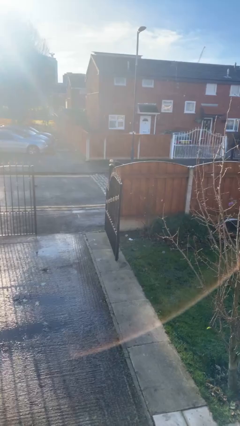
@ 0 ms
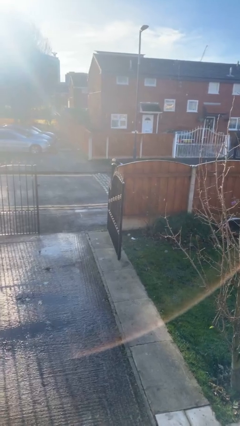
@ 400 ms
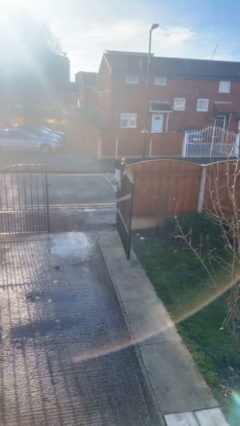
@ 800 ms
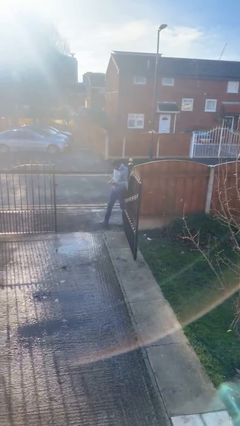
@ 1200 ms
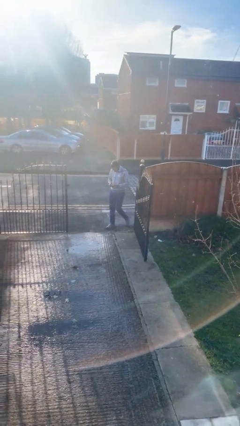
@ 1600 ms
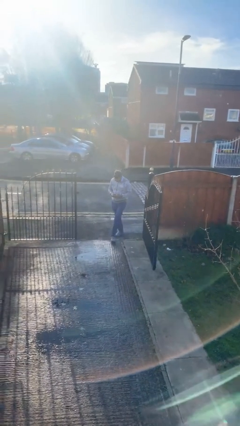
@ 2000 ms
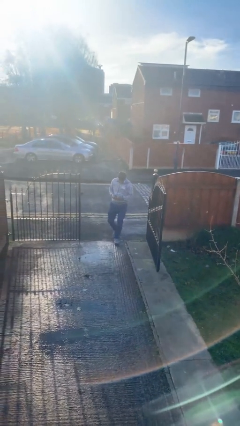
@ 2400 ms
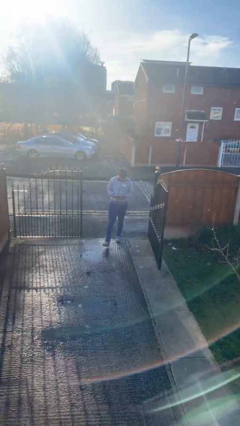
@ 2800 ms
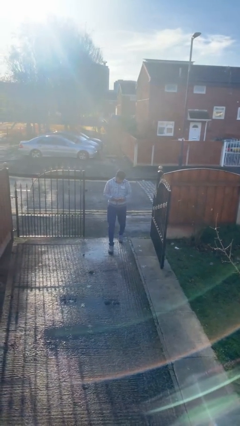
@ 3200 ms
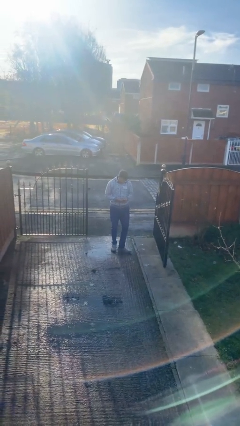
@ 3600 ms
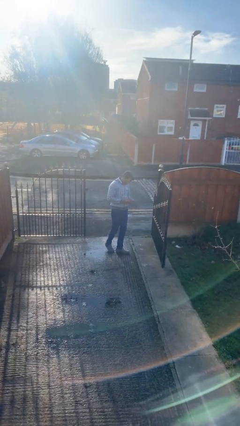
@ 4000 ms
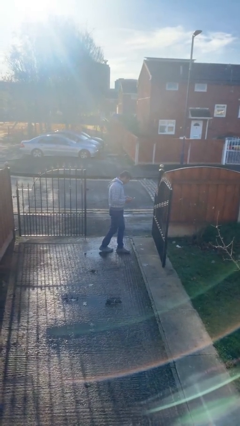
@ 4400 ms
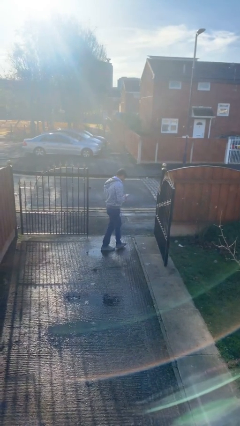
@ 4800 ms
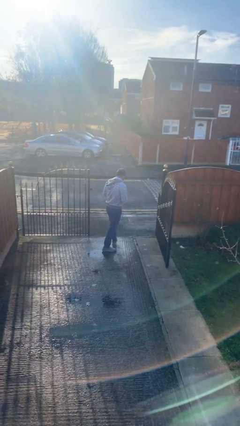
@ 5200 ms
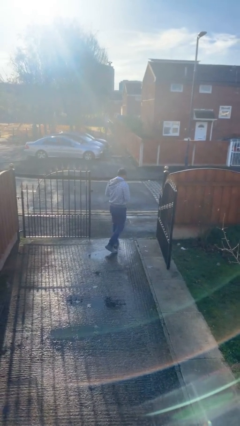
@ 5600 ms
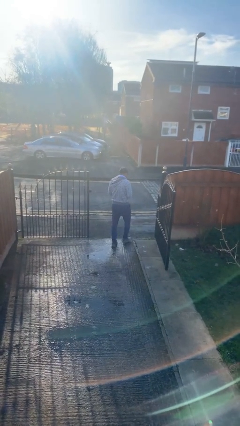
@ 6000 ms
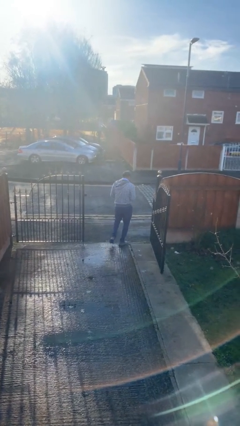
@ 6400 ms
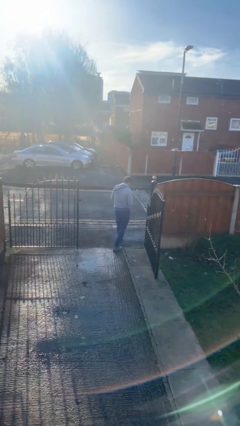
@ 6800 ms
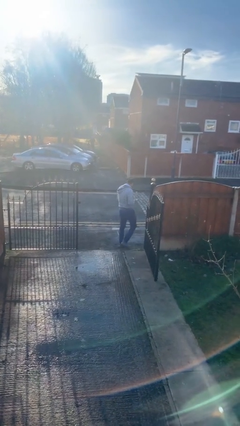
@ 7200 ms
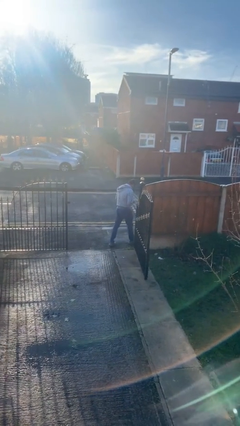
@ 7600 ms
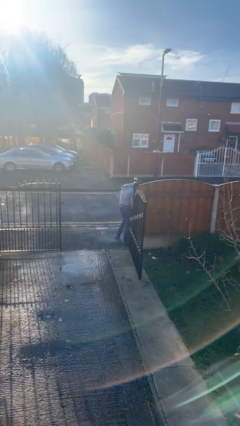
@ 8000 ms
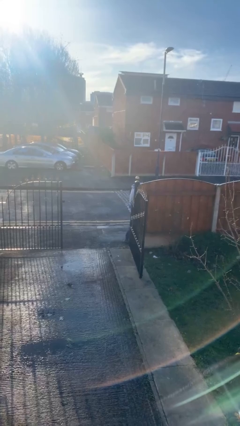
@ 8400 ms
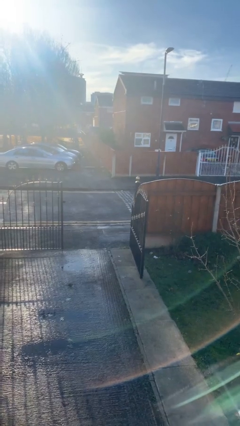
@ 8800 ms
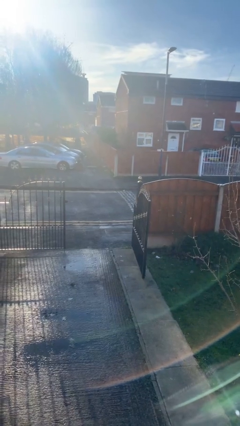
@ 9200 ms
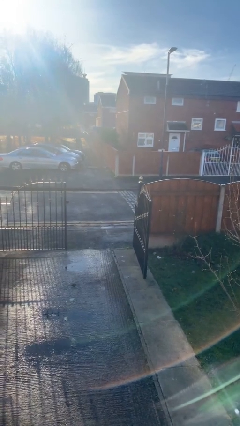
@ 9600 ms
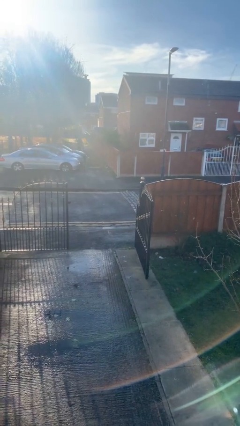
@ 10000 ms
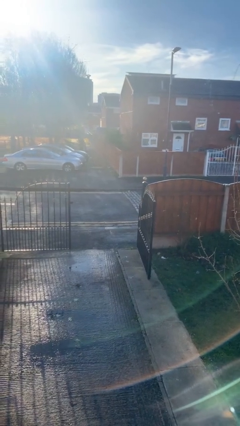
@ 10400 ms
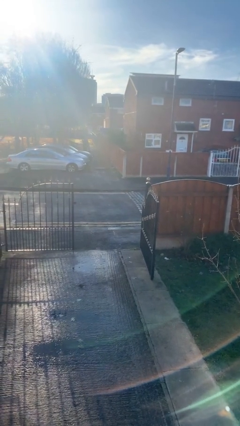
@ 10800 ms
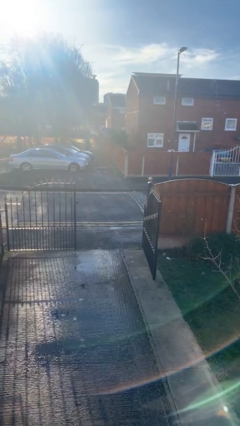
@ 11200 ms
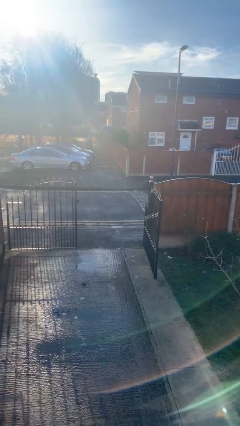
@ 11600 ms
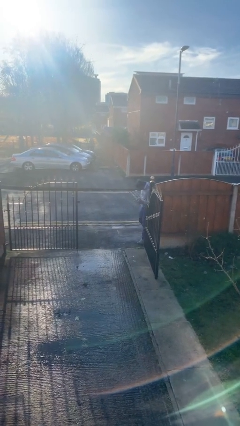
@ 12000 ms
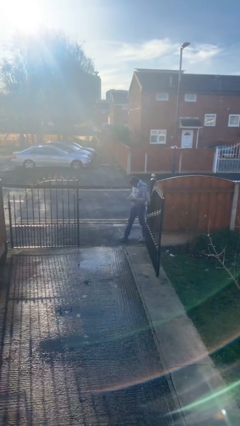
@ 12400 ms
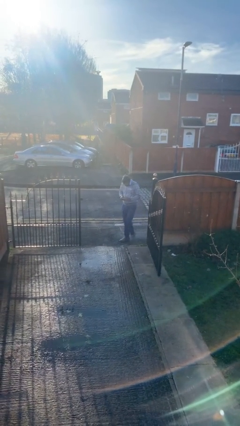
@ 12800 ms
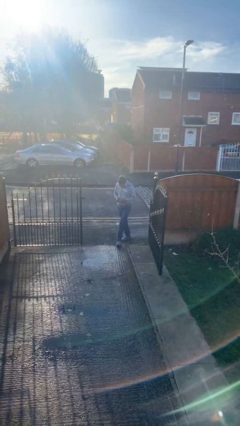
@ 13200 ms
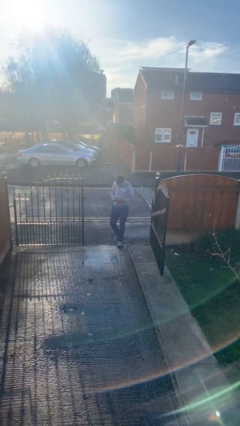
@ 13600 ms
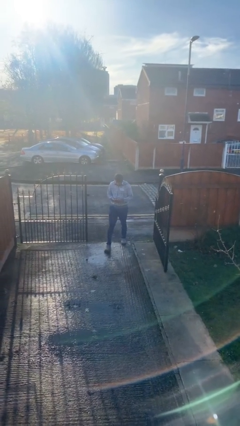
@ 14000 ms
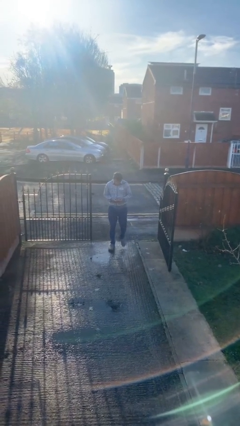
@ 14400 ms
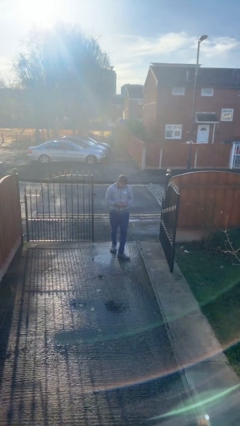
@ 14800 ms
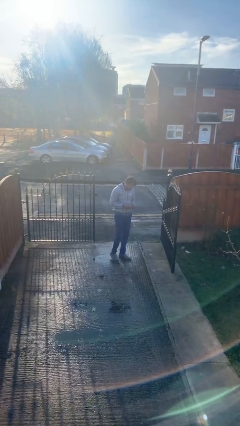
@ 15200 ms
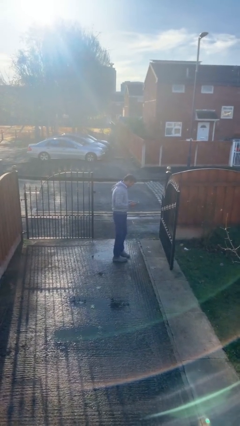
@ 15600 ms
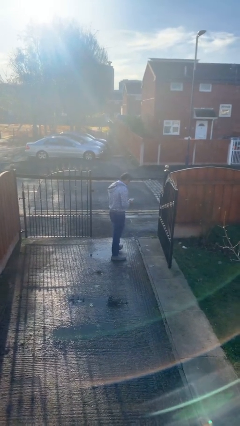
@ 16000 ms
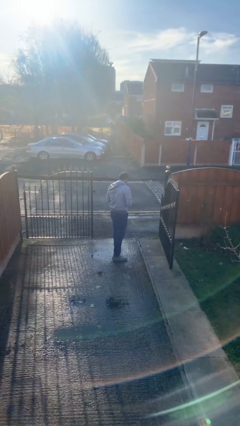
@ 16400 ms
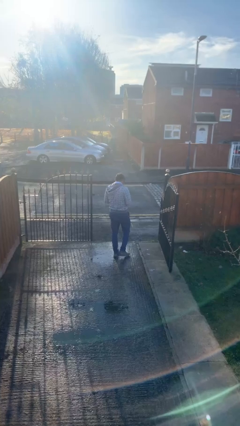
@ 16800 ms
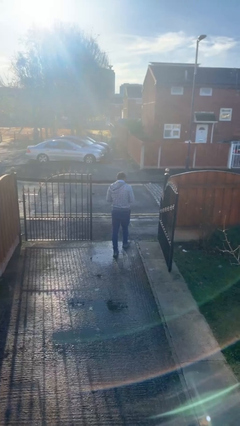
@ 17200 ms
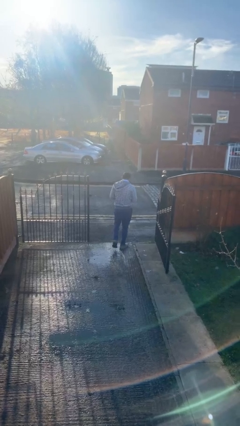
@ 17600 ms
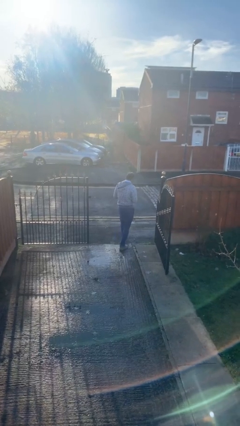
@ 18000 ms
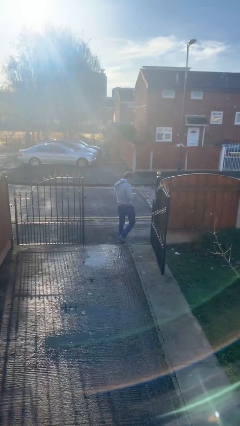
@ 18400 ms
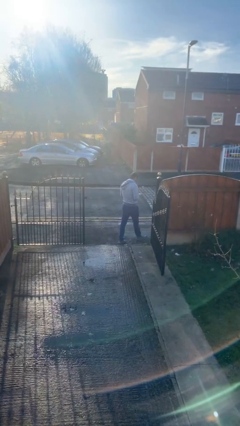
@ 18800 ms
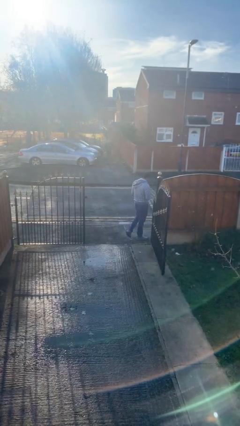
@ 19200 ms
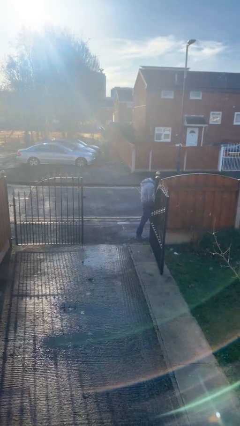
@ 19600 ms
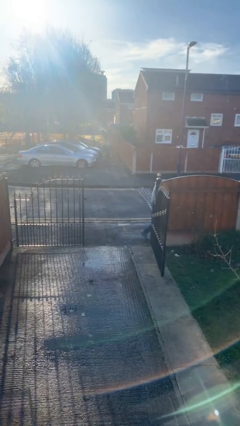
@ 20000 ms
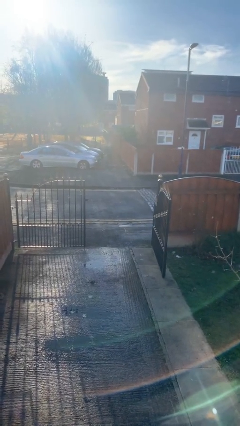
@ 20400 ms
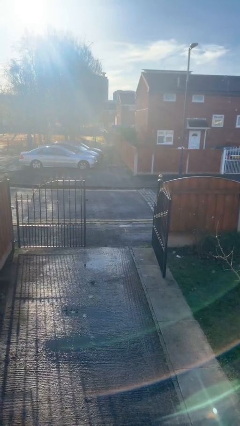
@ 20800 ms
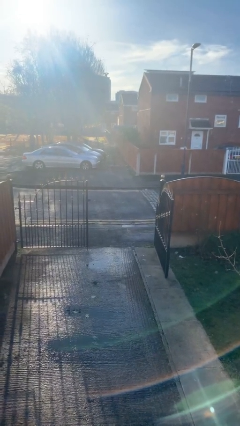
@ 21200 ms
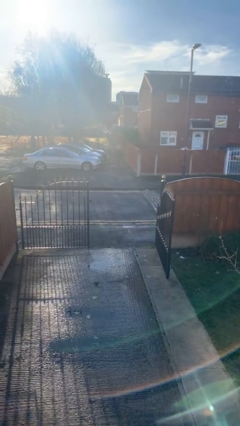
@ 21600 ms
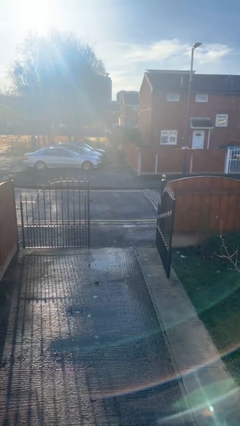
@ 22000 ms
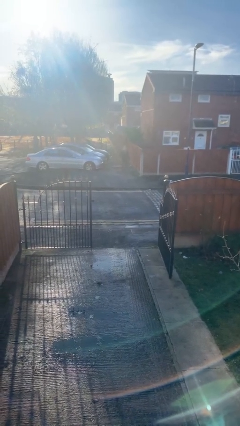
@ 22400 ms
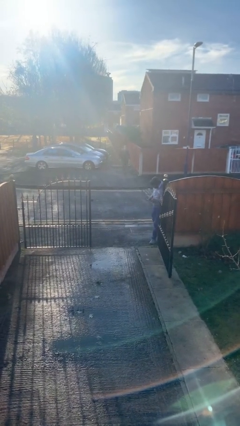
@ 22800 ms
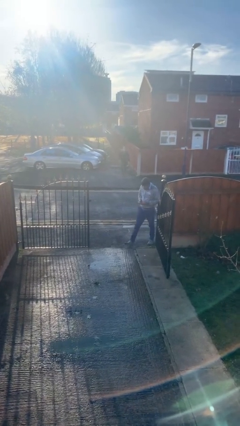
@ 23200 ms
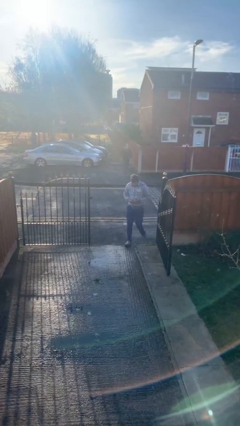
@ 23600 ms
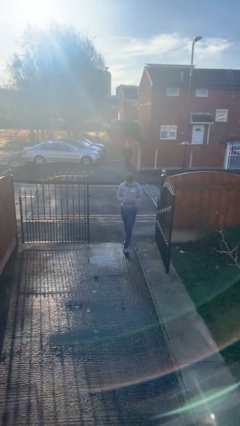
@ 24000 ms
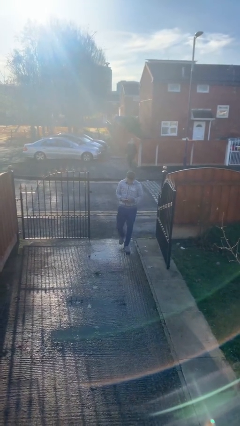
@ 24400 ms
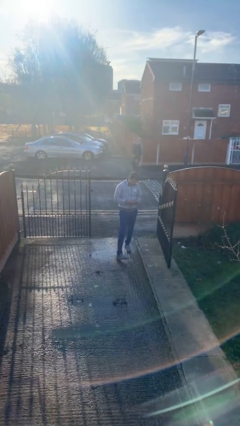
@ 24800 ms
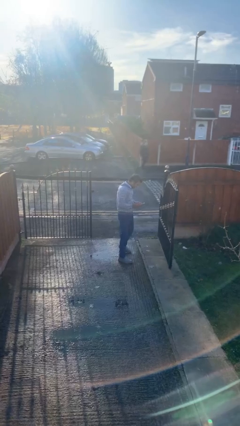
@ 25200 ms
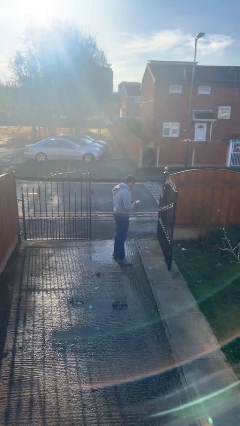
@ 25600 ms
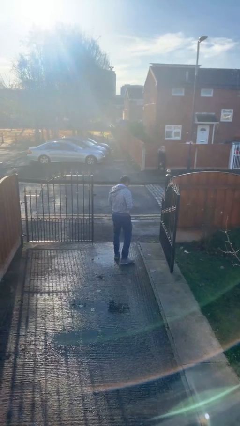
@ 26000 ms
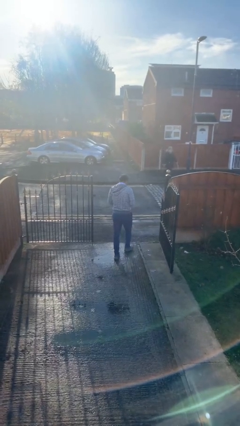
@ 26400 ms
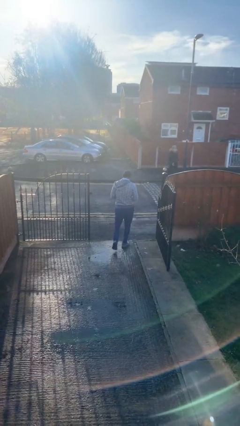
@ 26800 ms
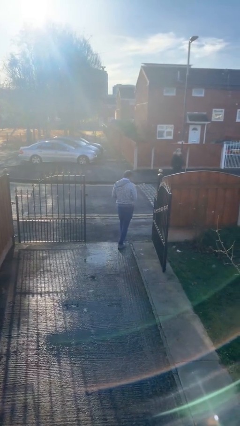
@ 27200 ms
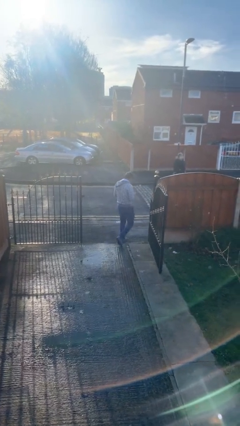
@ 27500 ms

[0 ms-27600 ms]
person texts on phone

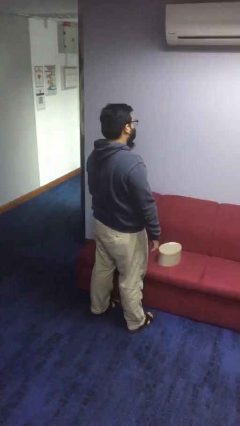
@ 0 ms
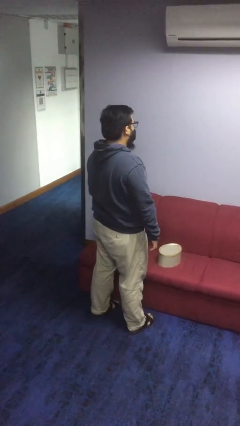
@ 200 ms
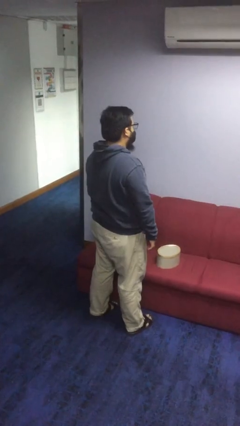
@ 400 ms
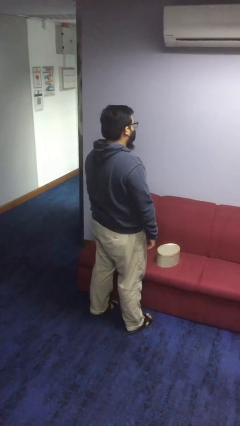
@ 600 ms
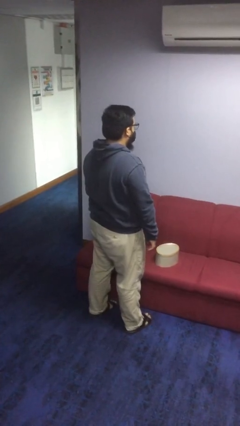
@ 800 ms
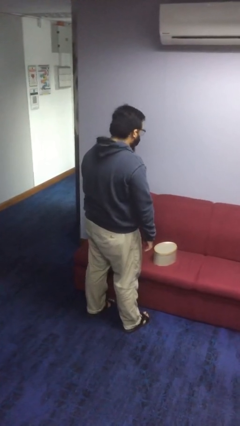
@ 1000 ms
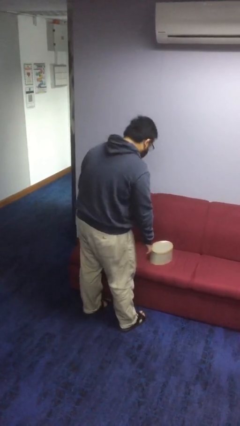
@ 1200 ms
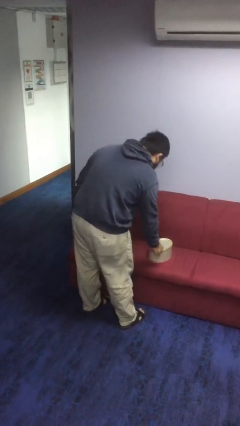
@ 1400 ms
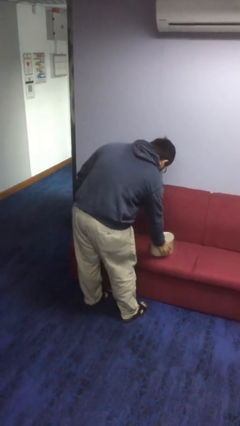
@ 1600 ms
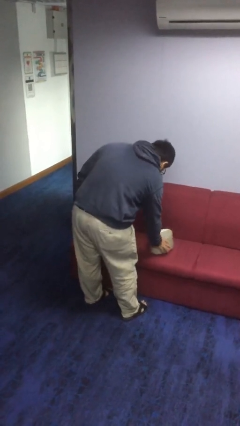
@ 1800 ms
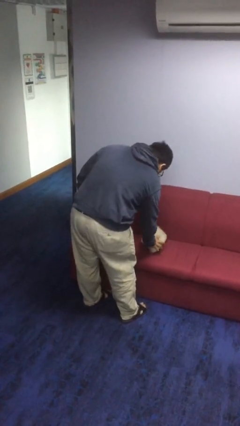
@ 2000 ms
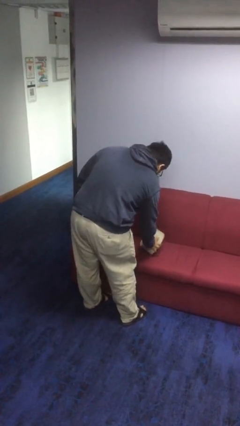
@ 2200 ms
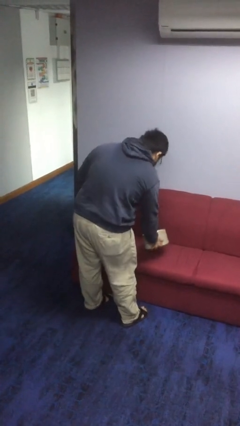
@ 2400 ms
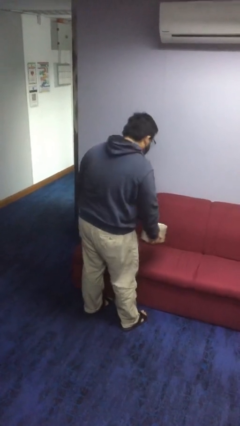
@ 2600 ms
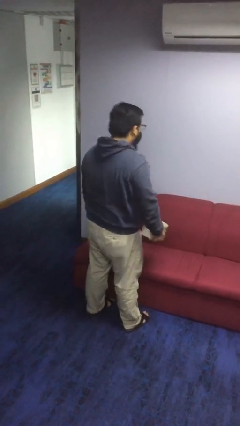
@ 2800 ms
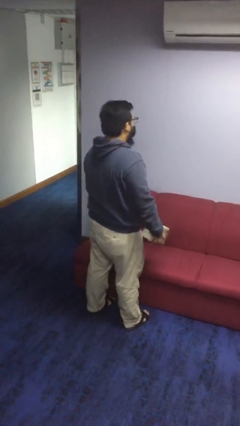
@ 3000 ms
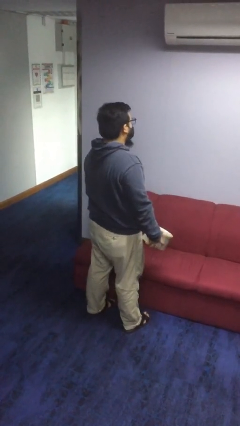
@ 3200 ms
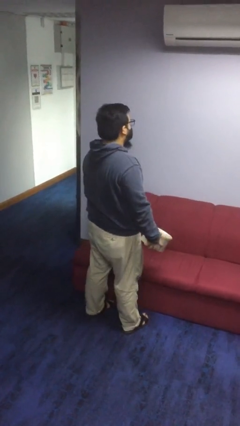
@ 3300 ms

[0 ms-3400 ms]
person picks up object from couch

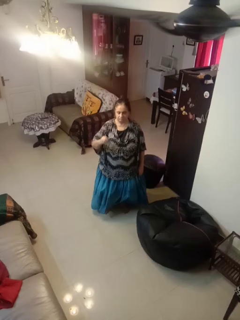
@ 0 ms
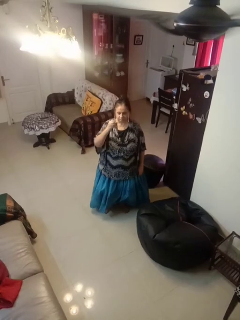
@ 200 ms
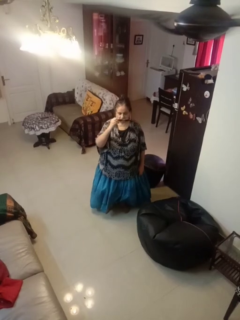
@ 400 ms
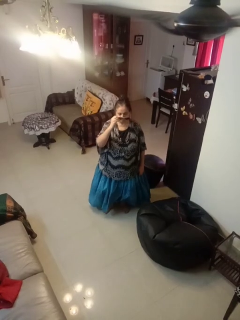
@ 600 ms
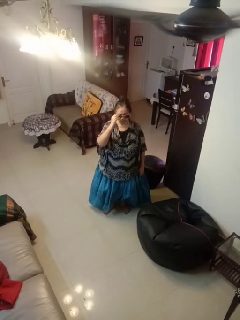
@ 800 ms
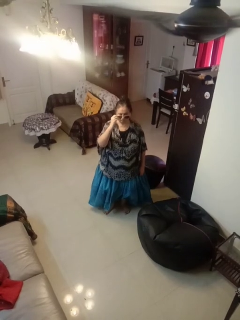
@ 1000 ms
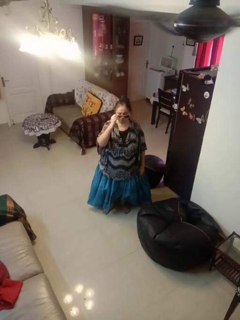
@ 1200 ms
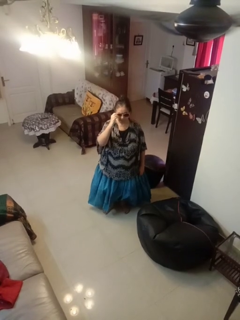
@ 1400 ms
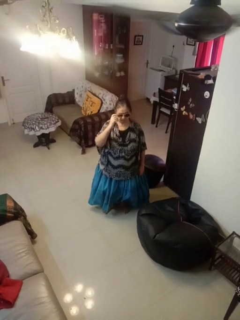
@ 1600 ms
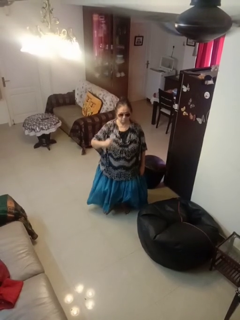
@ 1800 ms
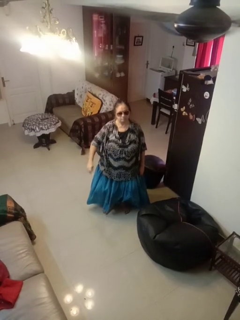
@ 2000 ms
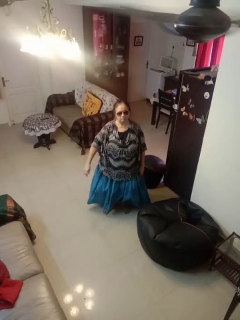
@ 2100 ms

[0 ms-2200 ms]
person puts on sunglasses
